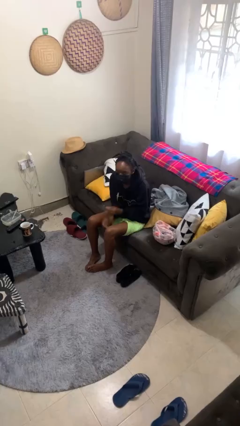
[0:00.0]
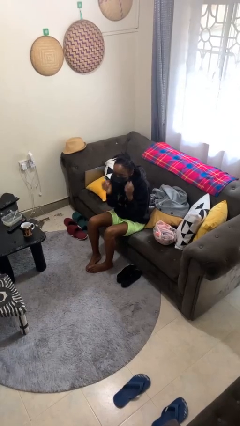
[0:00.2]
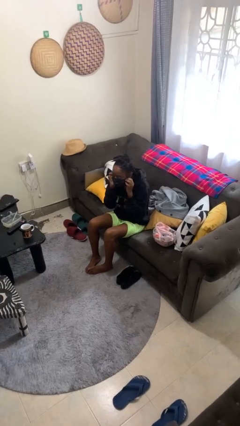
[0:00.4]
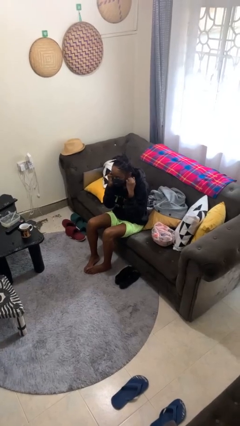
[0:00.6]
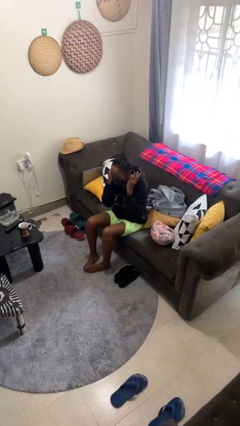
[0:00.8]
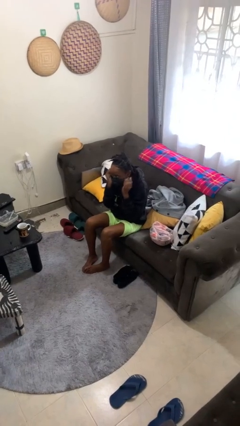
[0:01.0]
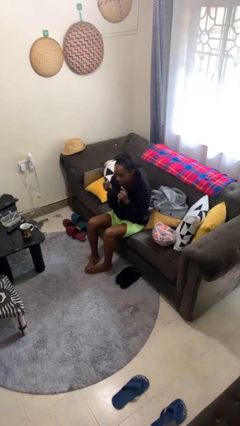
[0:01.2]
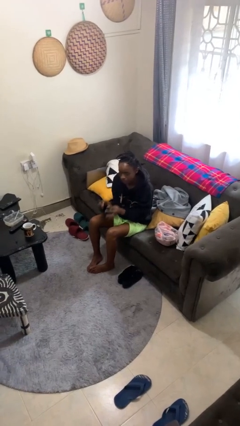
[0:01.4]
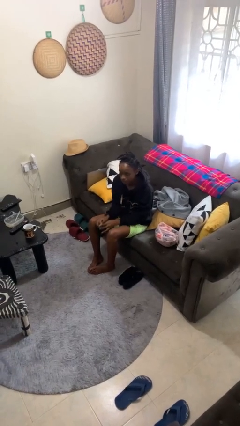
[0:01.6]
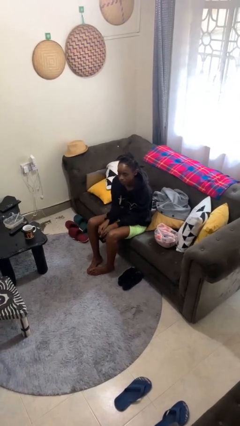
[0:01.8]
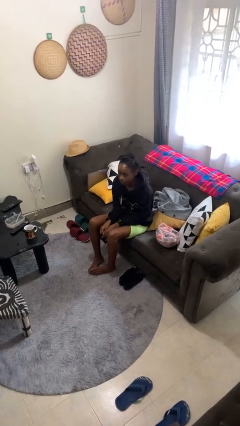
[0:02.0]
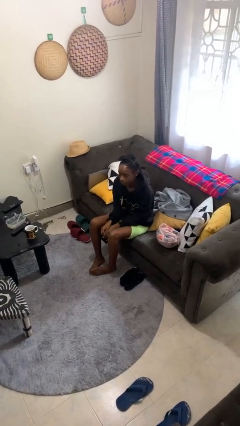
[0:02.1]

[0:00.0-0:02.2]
person takes off facemask

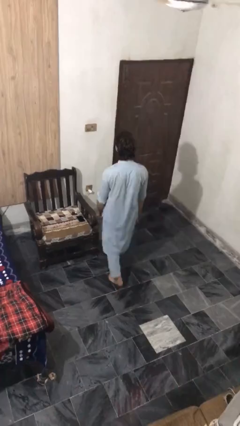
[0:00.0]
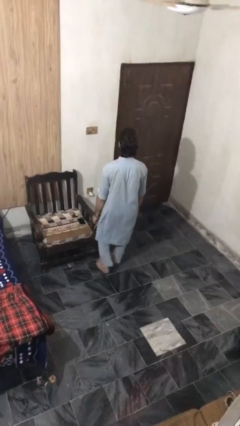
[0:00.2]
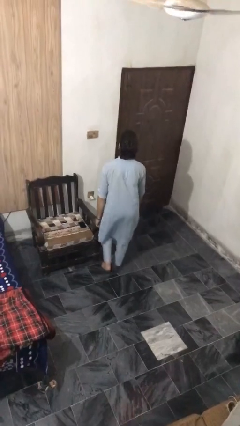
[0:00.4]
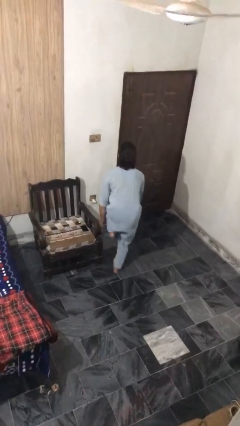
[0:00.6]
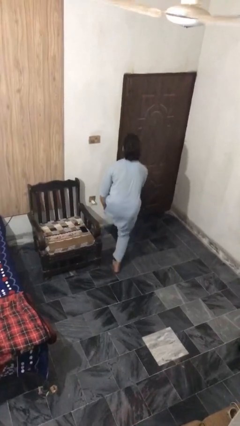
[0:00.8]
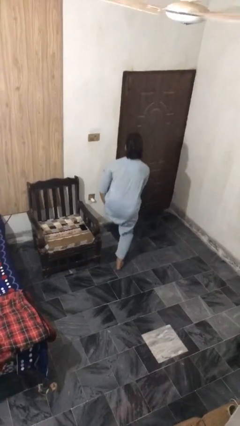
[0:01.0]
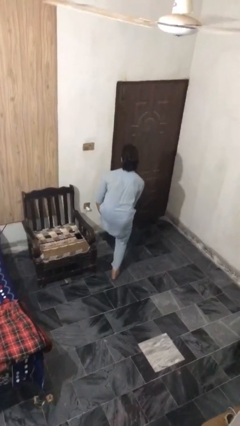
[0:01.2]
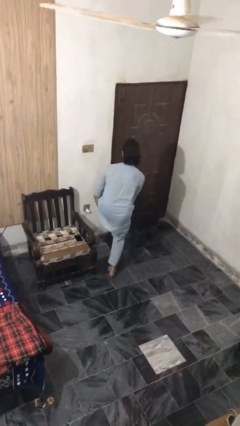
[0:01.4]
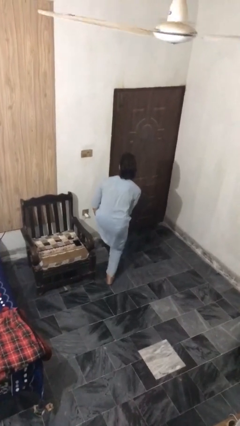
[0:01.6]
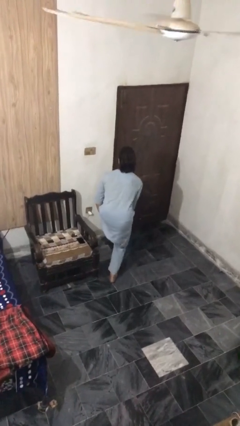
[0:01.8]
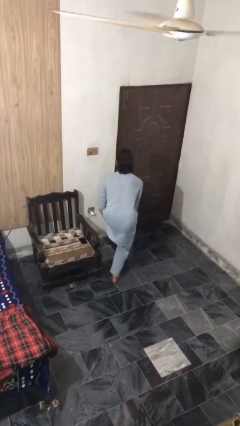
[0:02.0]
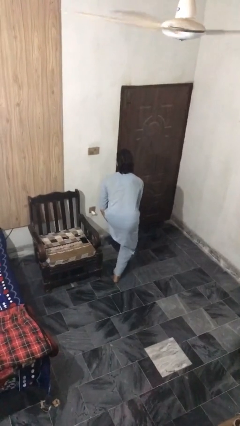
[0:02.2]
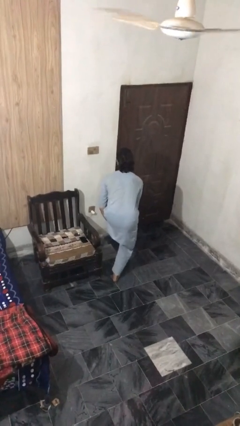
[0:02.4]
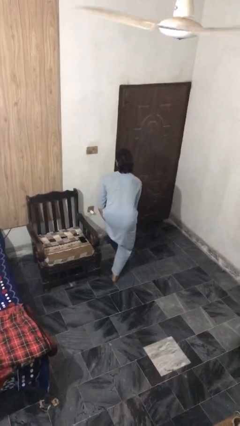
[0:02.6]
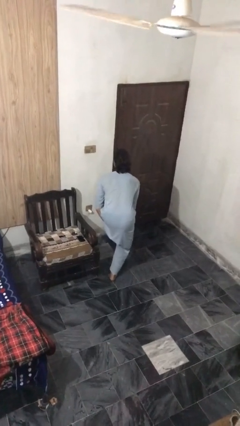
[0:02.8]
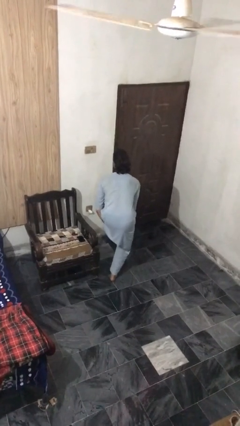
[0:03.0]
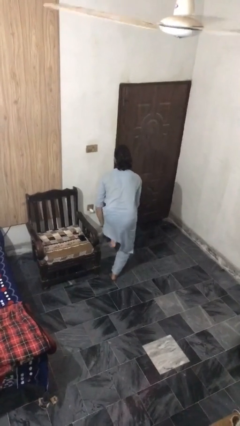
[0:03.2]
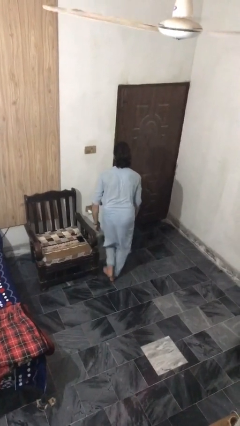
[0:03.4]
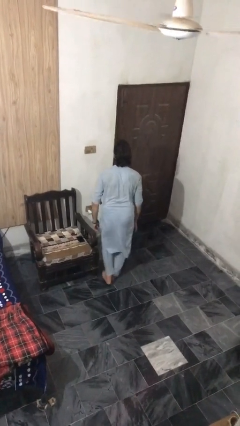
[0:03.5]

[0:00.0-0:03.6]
person stubs toe

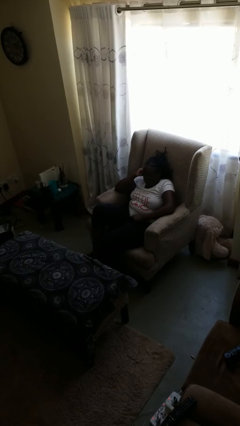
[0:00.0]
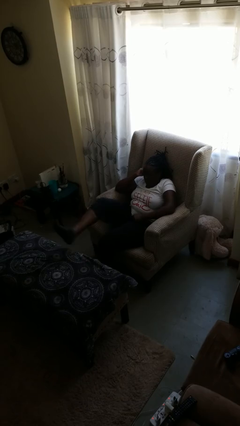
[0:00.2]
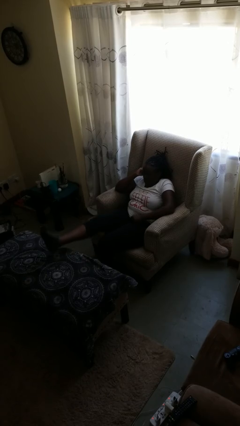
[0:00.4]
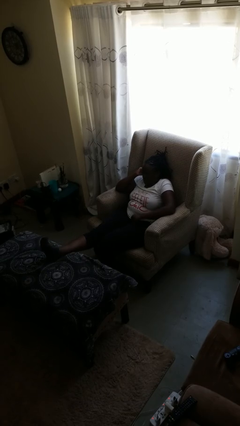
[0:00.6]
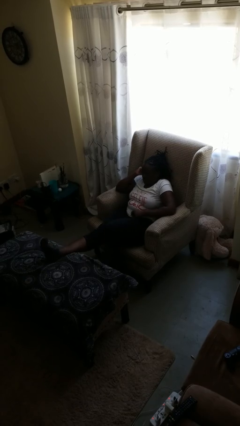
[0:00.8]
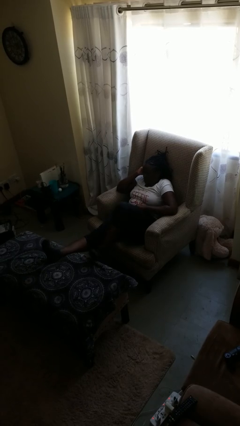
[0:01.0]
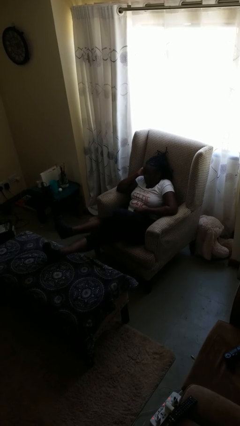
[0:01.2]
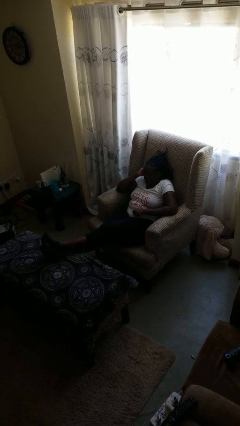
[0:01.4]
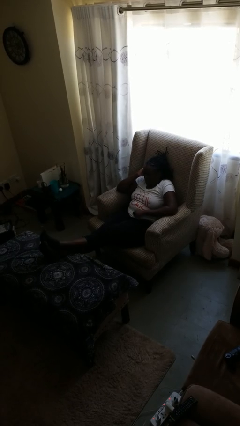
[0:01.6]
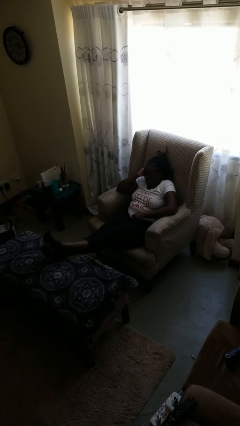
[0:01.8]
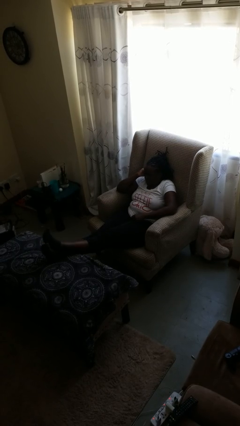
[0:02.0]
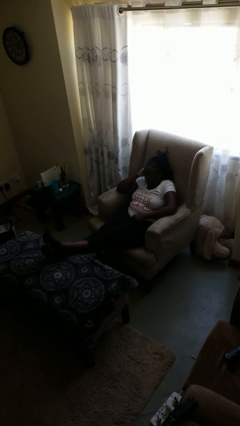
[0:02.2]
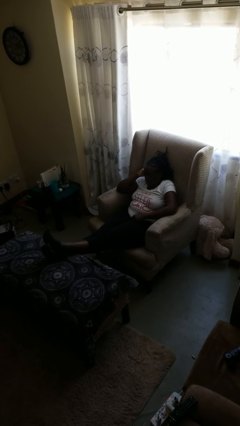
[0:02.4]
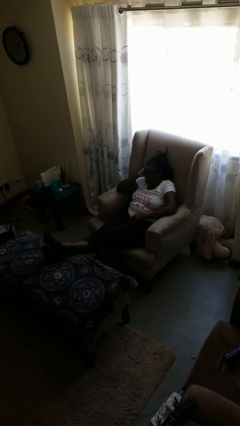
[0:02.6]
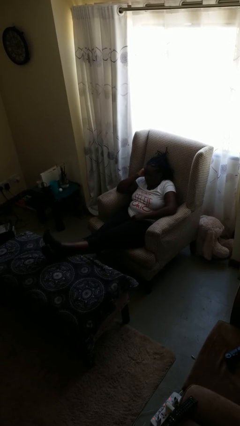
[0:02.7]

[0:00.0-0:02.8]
person puts feet up

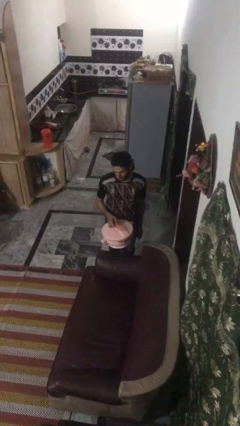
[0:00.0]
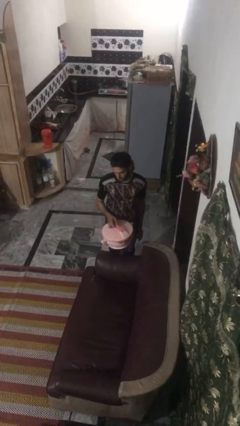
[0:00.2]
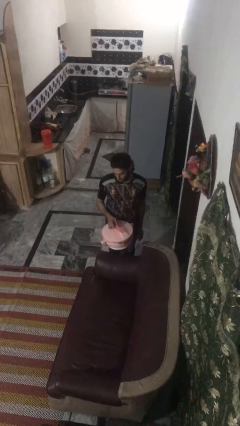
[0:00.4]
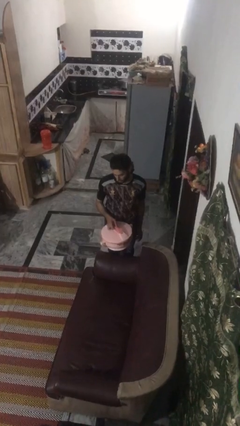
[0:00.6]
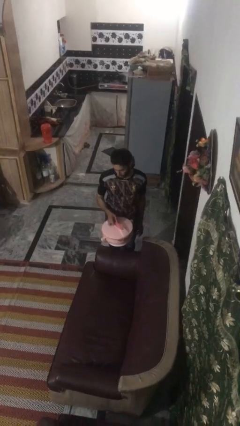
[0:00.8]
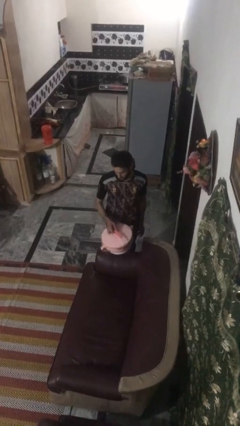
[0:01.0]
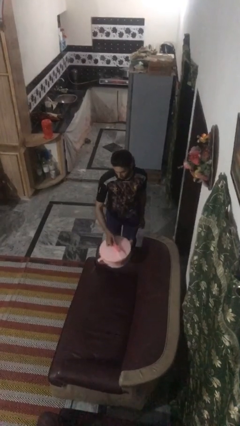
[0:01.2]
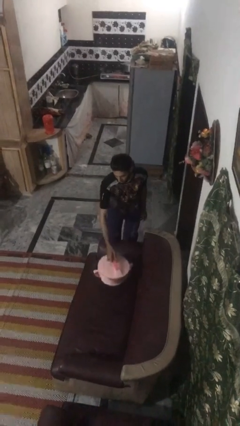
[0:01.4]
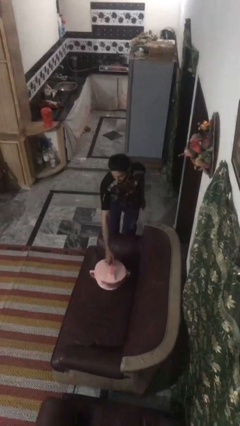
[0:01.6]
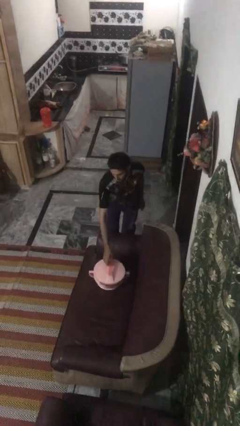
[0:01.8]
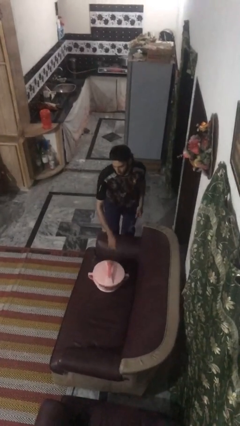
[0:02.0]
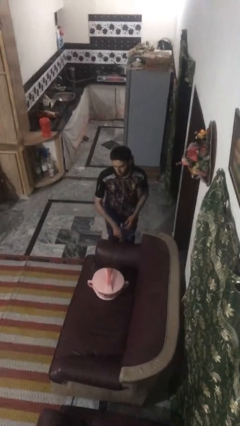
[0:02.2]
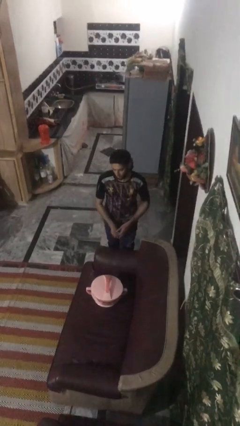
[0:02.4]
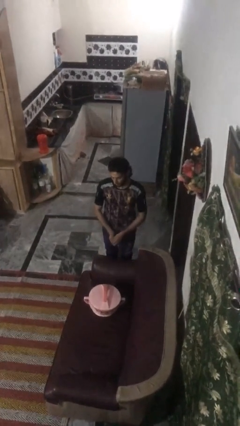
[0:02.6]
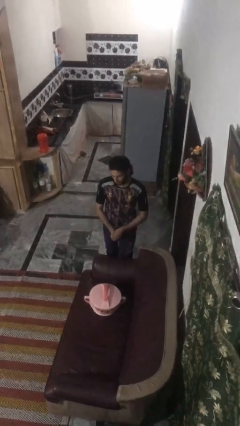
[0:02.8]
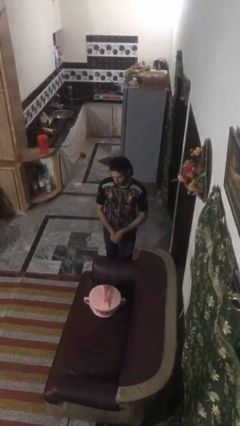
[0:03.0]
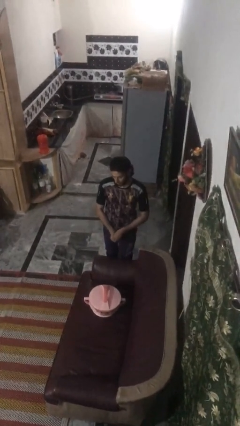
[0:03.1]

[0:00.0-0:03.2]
person puts down object on couch

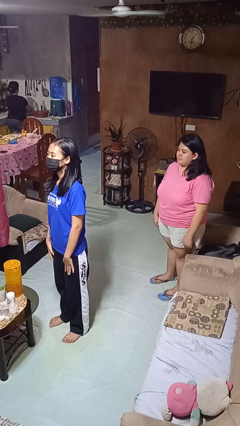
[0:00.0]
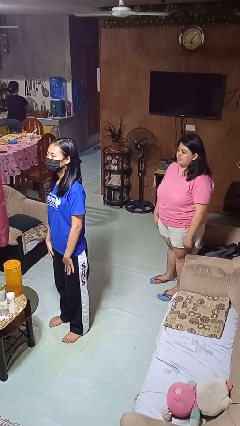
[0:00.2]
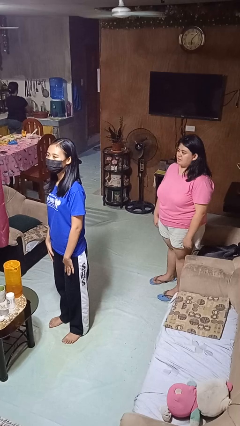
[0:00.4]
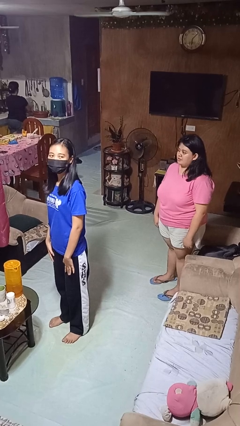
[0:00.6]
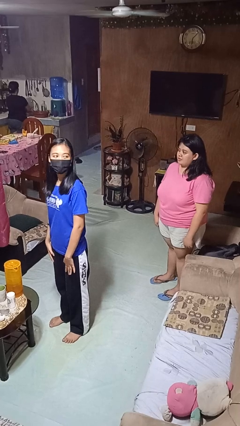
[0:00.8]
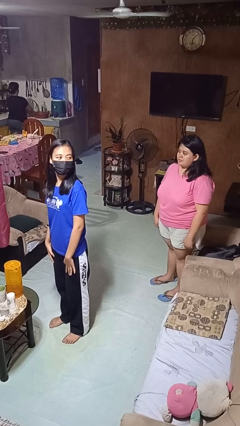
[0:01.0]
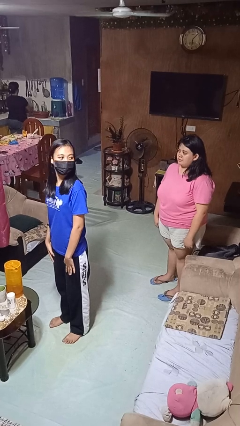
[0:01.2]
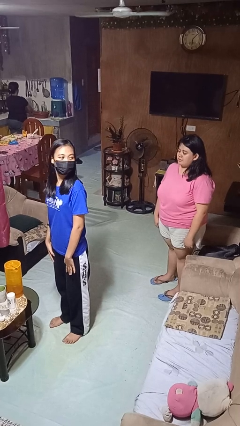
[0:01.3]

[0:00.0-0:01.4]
person looks over shoulder

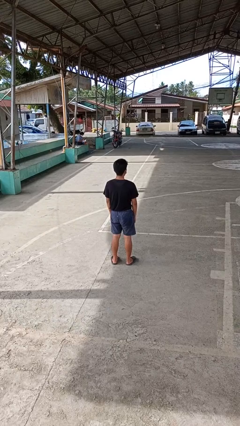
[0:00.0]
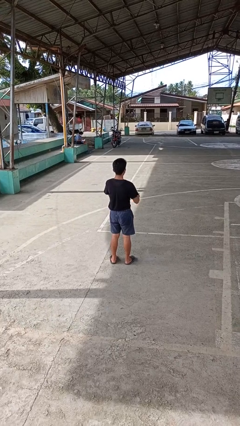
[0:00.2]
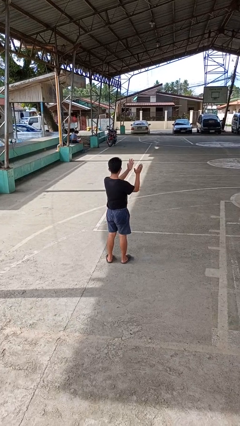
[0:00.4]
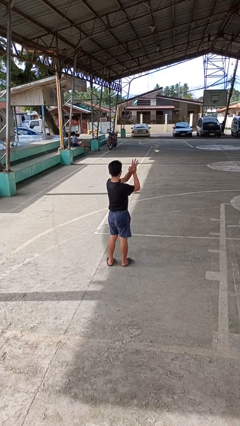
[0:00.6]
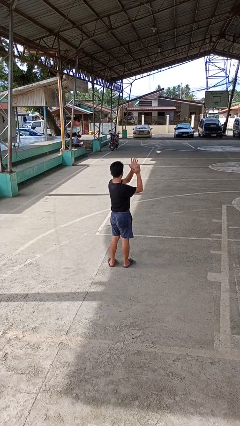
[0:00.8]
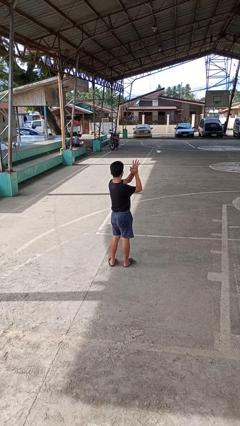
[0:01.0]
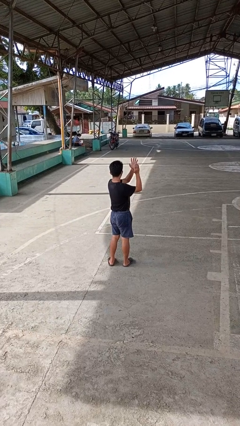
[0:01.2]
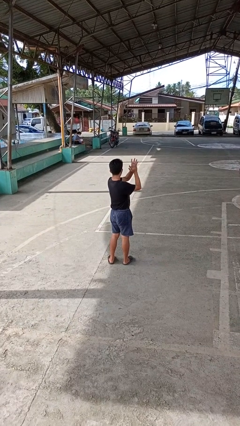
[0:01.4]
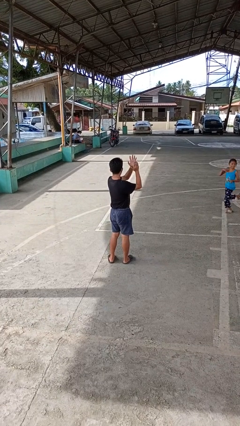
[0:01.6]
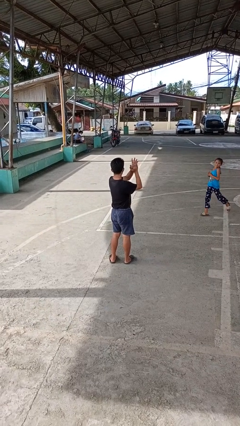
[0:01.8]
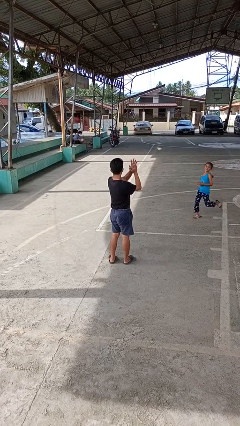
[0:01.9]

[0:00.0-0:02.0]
person claps hands

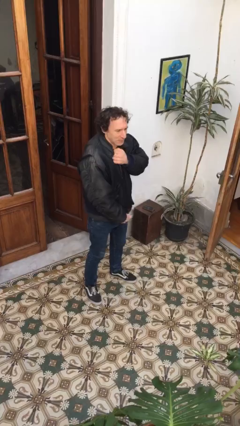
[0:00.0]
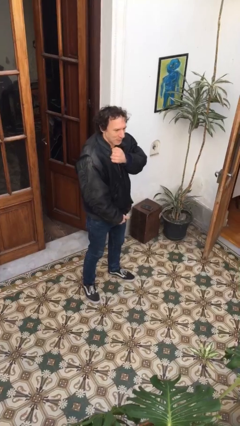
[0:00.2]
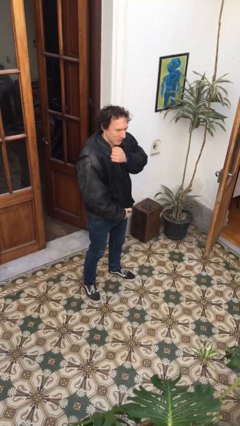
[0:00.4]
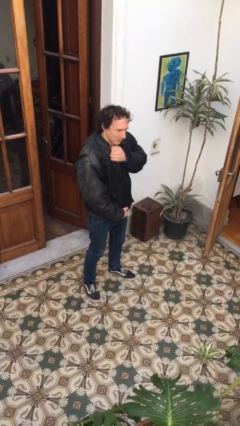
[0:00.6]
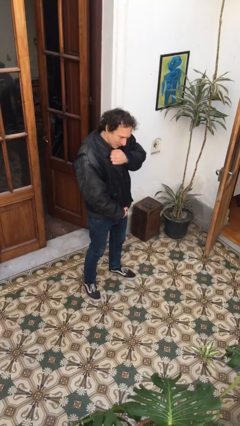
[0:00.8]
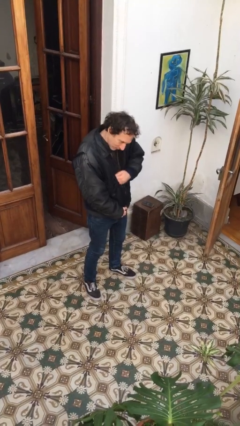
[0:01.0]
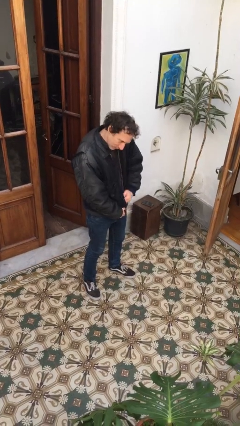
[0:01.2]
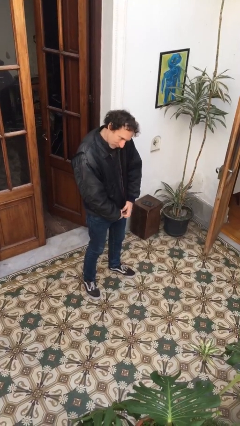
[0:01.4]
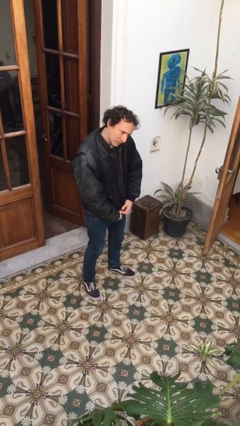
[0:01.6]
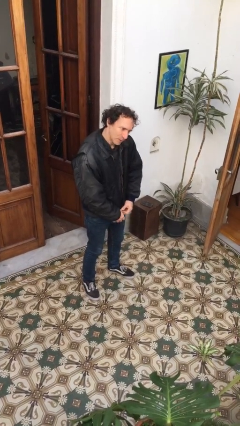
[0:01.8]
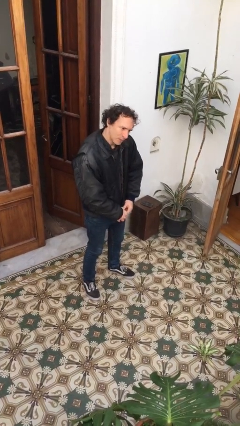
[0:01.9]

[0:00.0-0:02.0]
person unzips jacket
